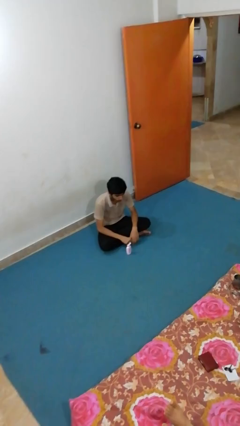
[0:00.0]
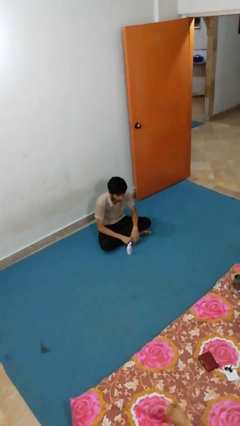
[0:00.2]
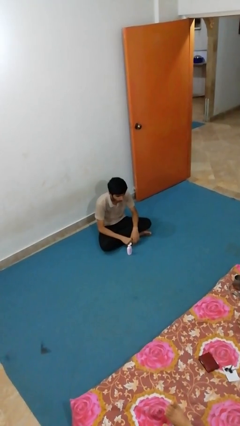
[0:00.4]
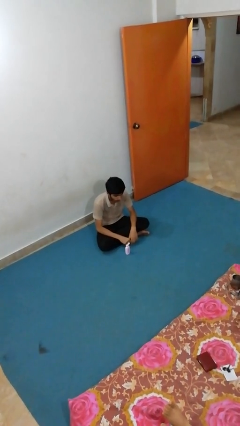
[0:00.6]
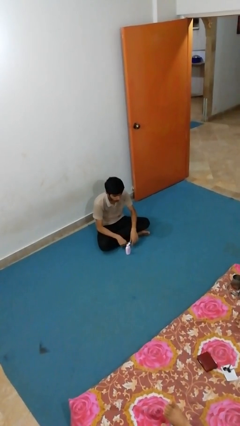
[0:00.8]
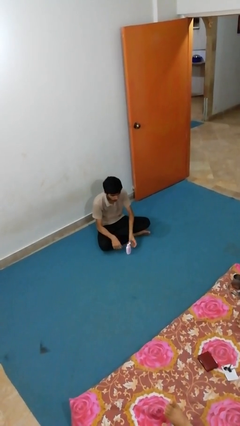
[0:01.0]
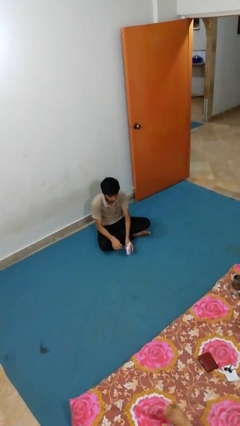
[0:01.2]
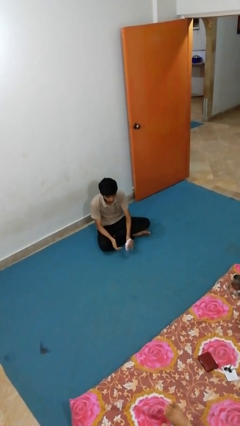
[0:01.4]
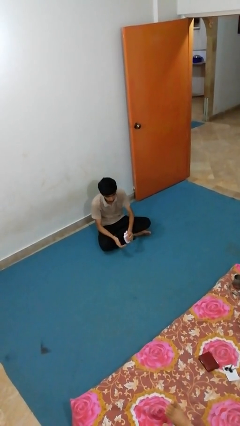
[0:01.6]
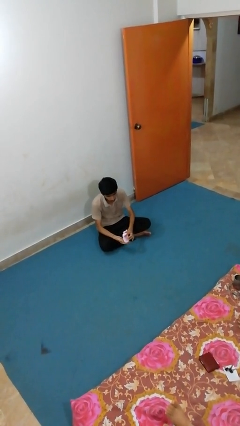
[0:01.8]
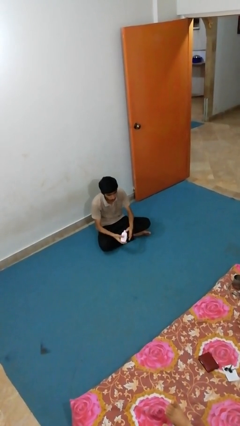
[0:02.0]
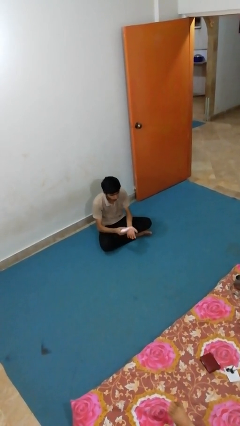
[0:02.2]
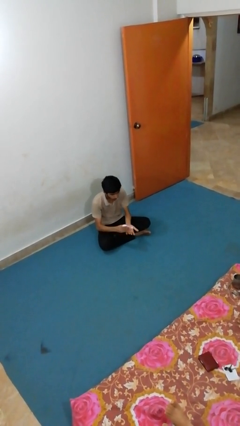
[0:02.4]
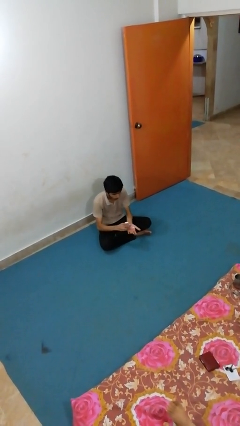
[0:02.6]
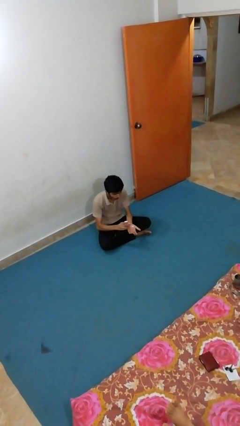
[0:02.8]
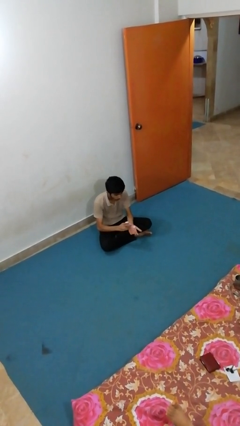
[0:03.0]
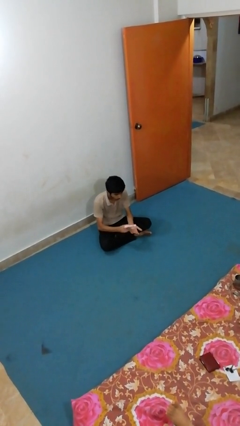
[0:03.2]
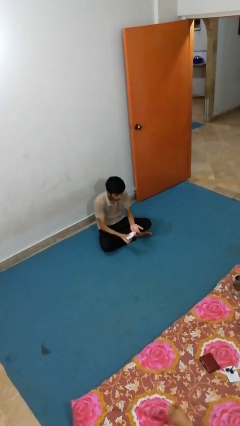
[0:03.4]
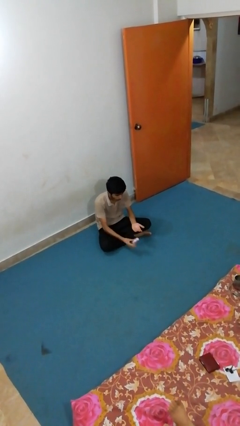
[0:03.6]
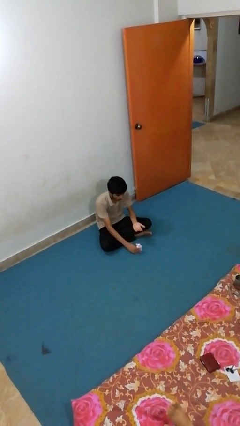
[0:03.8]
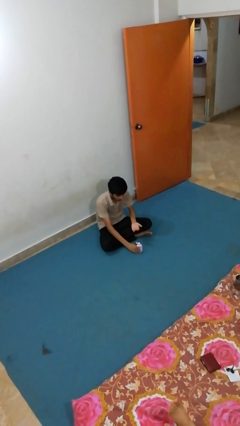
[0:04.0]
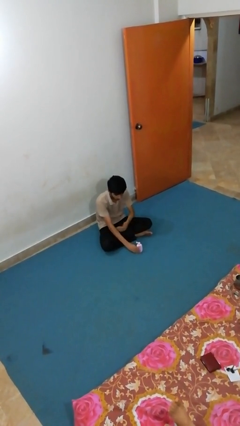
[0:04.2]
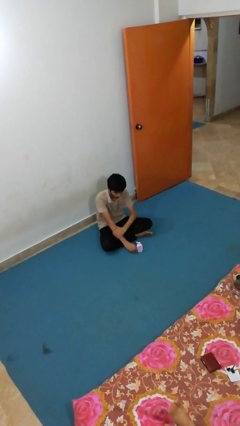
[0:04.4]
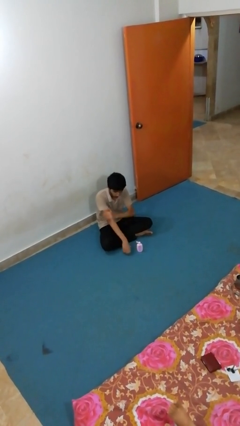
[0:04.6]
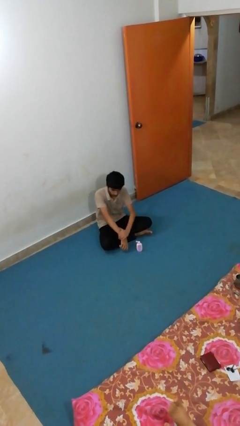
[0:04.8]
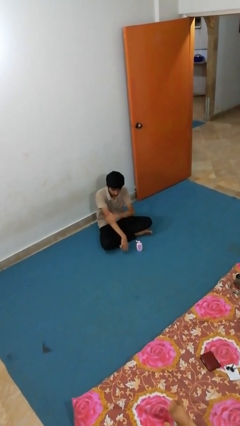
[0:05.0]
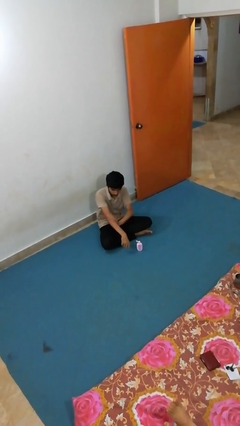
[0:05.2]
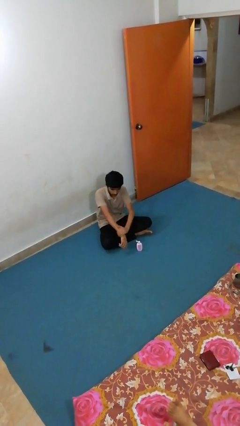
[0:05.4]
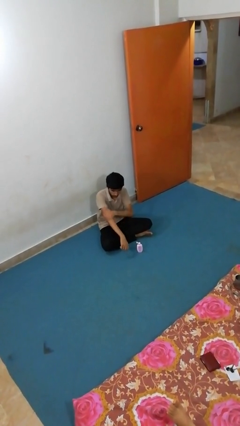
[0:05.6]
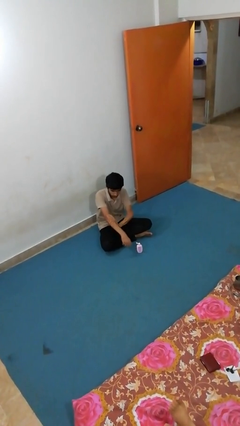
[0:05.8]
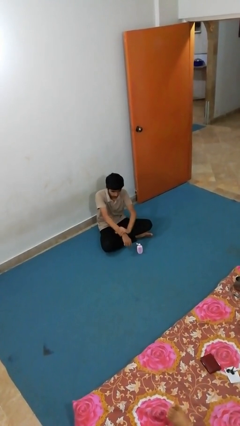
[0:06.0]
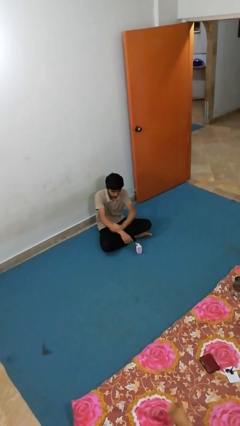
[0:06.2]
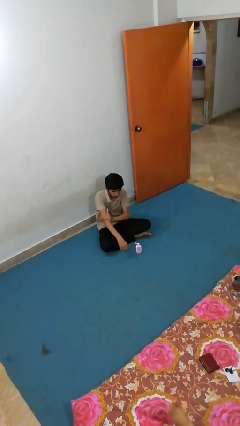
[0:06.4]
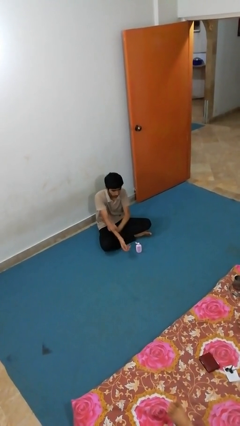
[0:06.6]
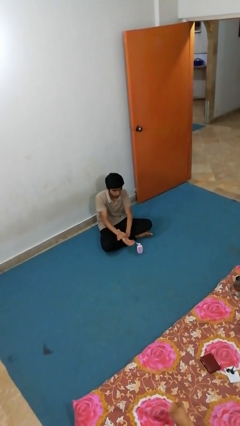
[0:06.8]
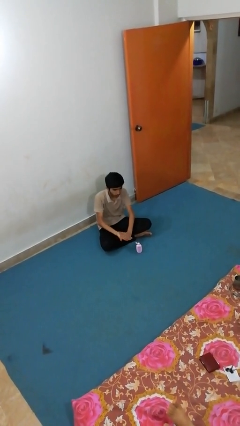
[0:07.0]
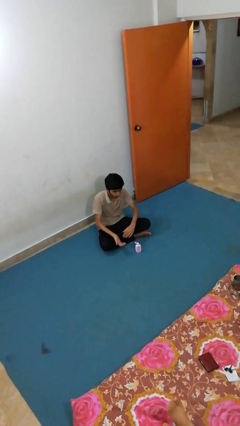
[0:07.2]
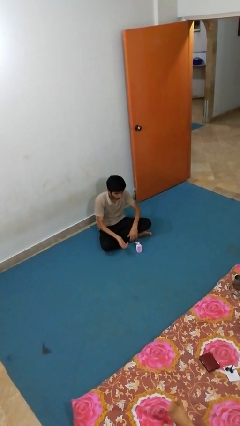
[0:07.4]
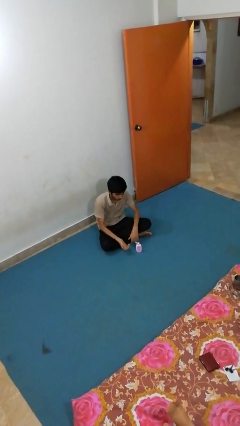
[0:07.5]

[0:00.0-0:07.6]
person applies sunscreen

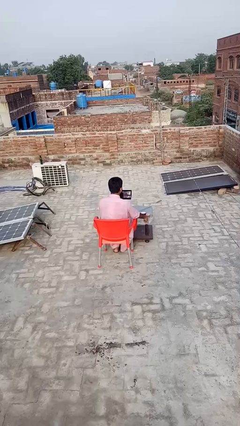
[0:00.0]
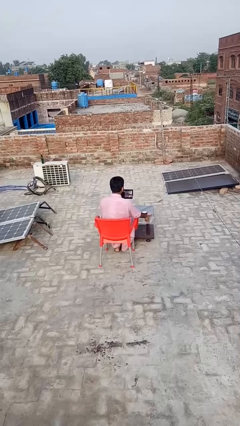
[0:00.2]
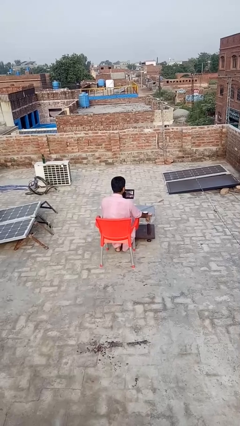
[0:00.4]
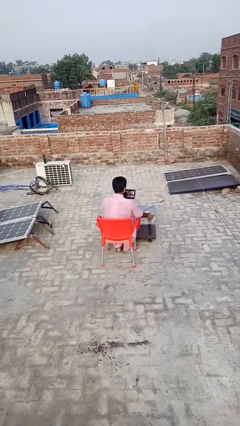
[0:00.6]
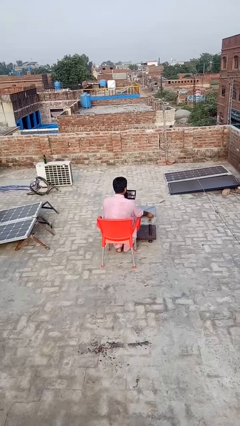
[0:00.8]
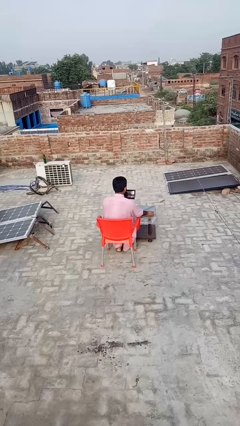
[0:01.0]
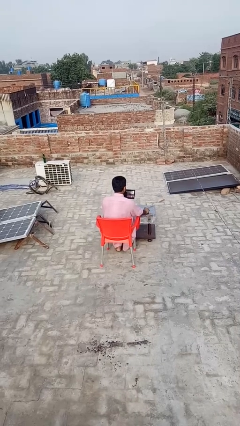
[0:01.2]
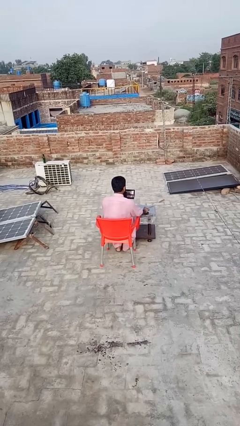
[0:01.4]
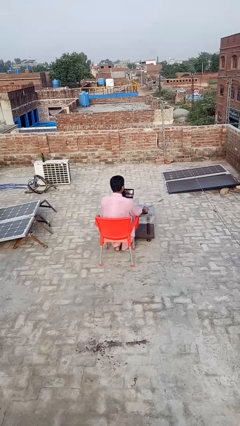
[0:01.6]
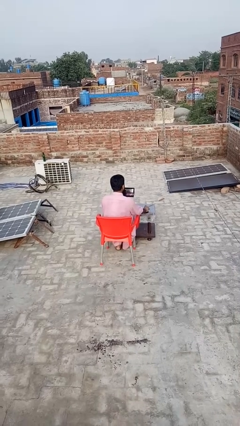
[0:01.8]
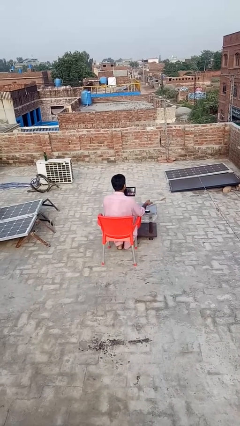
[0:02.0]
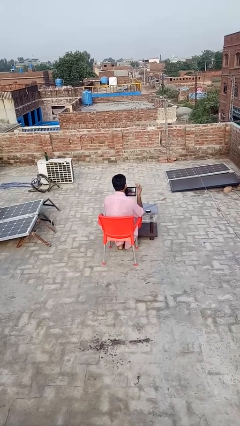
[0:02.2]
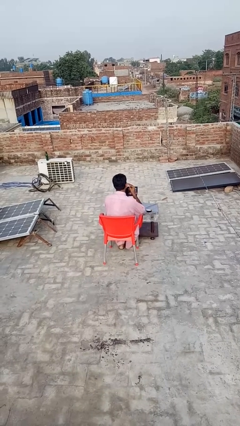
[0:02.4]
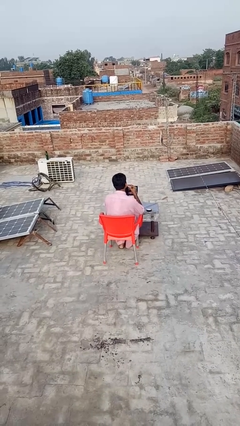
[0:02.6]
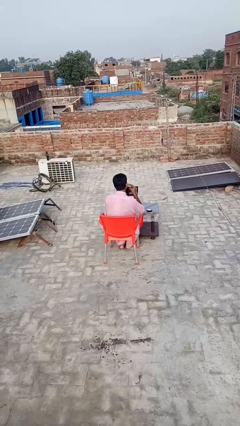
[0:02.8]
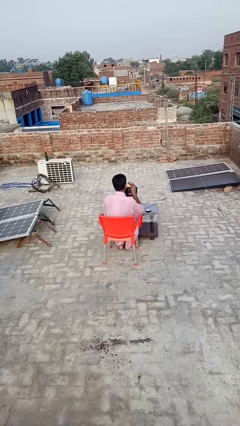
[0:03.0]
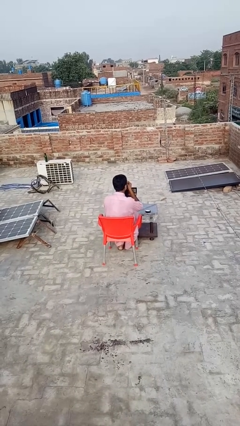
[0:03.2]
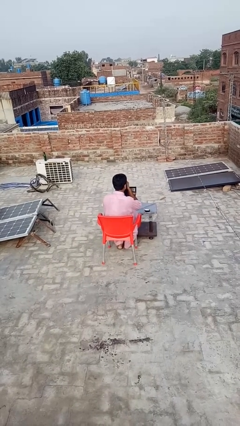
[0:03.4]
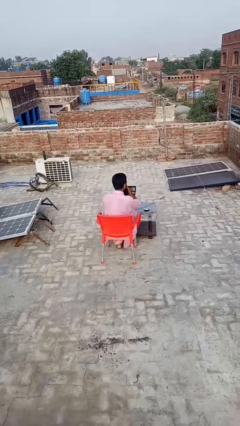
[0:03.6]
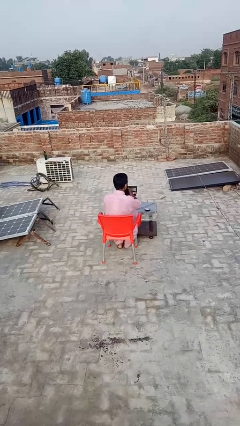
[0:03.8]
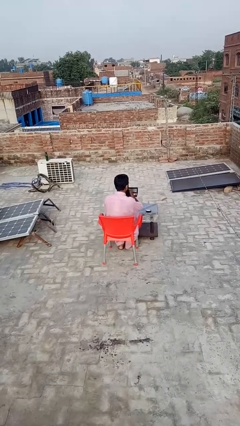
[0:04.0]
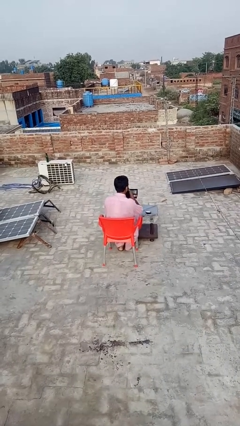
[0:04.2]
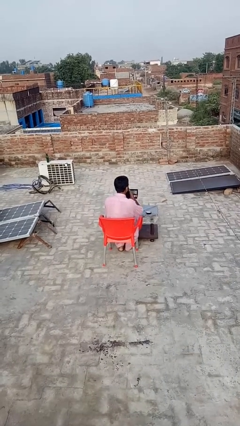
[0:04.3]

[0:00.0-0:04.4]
person applies foundation makeup

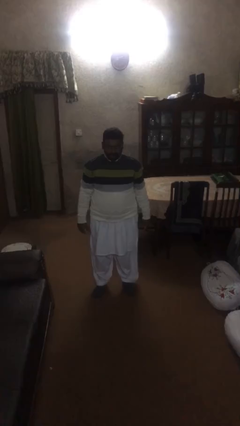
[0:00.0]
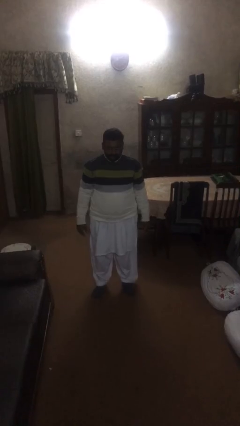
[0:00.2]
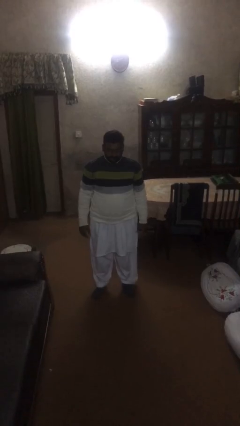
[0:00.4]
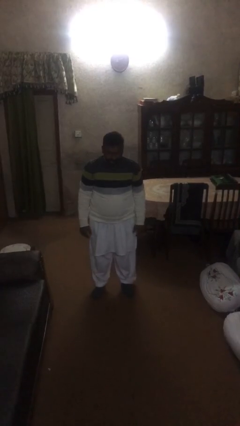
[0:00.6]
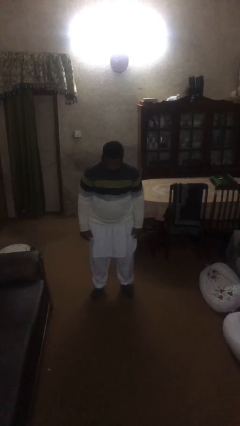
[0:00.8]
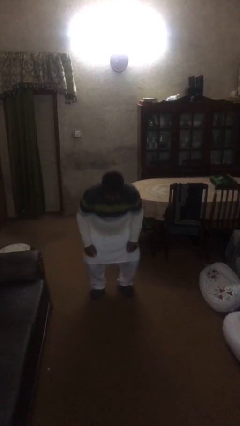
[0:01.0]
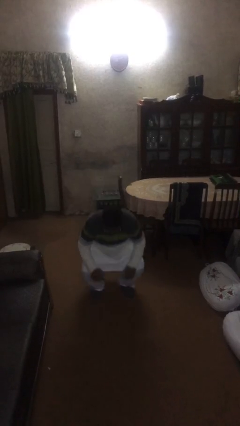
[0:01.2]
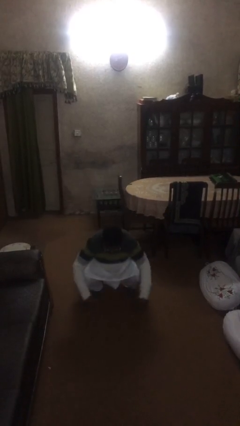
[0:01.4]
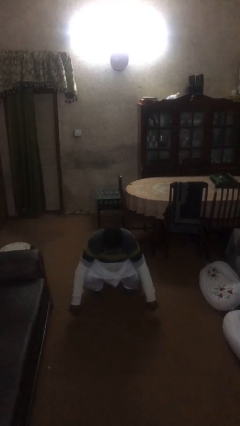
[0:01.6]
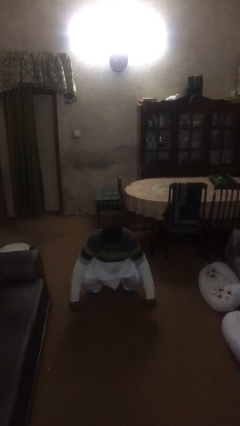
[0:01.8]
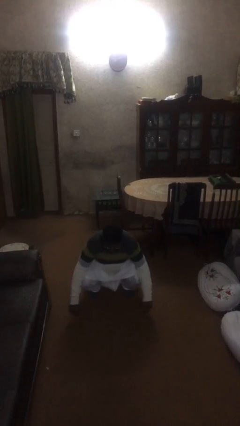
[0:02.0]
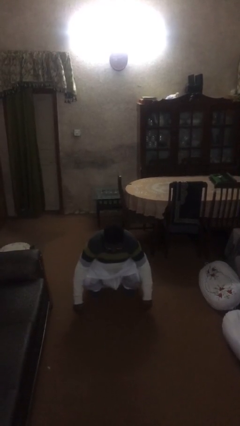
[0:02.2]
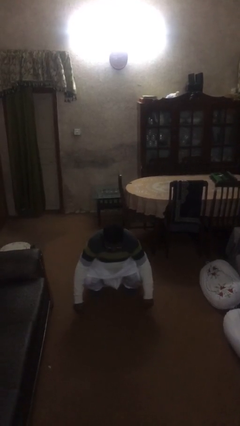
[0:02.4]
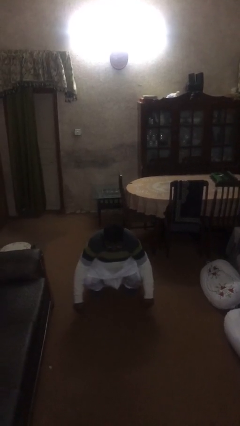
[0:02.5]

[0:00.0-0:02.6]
person sits down

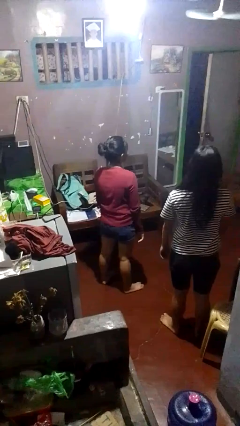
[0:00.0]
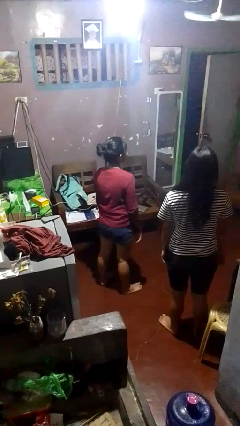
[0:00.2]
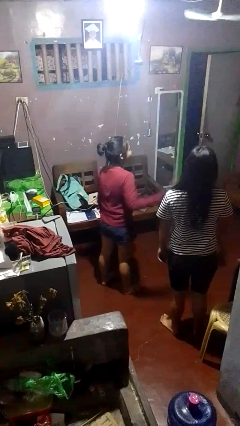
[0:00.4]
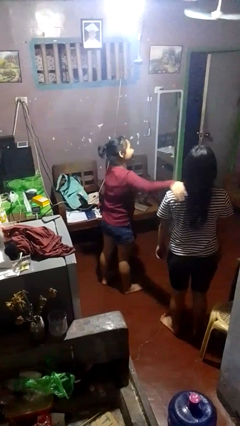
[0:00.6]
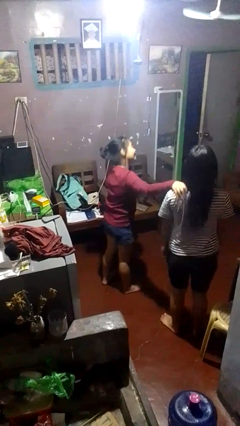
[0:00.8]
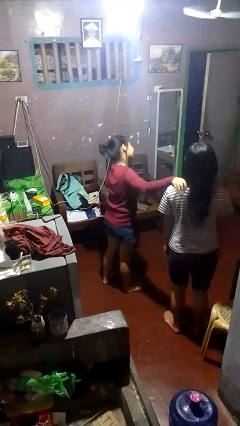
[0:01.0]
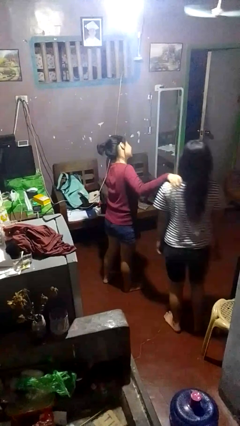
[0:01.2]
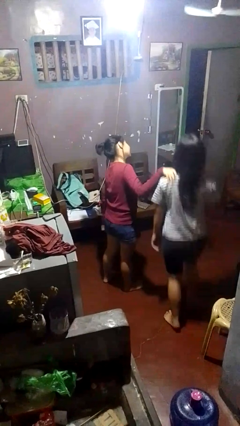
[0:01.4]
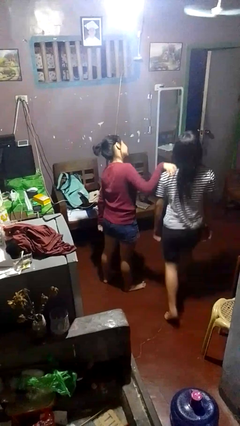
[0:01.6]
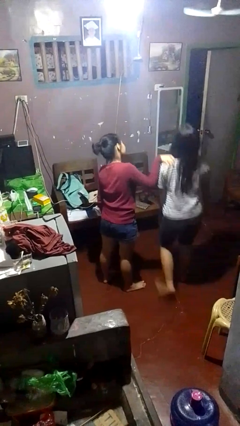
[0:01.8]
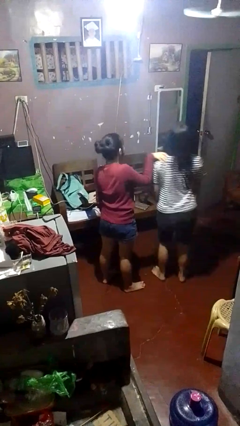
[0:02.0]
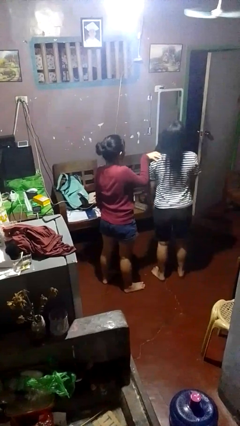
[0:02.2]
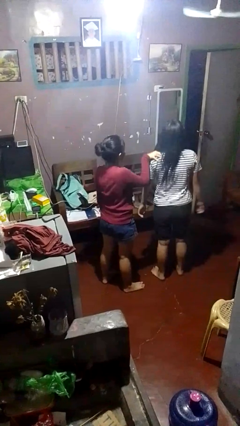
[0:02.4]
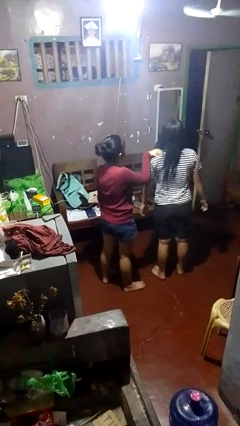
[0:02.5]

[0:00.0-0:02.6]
person grabs person by shoulder

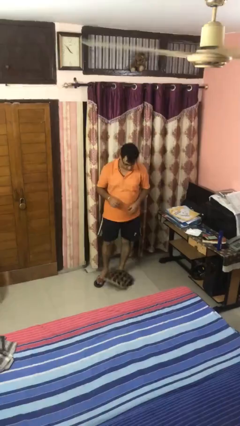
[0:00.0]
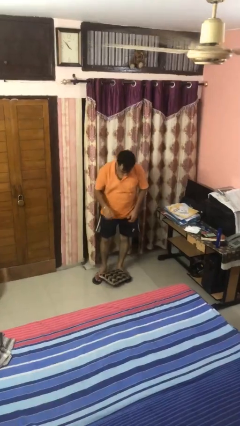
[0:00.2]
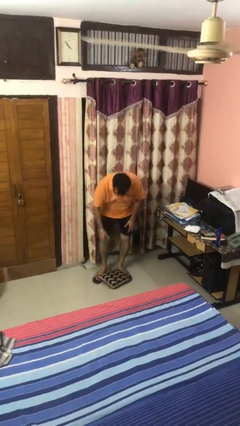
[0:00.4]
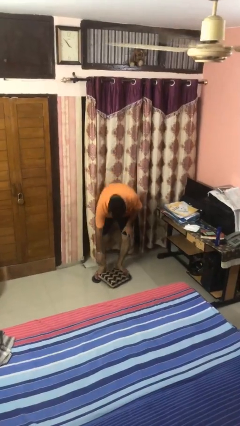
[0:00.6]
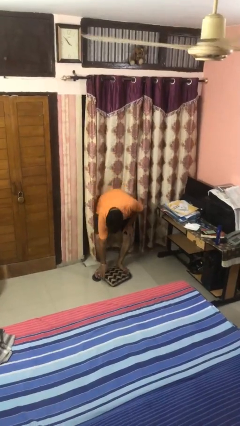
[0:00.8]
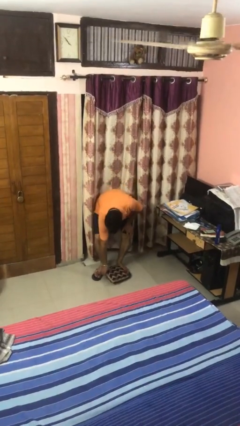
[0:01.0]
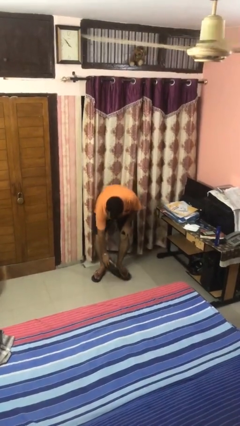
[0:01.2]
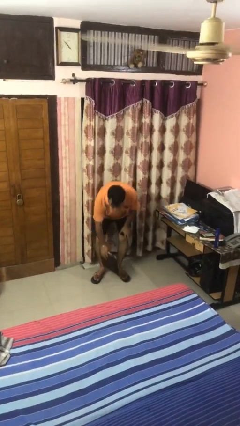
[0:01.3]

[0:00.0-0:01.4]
person picks up object from floor
